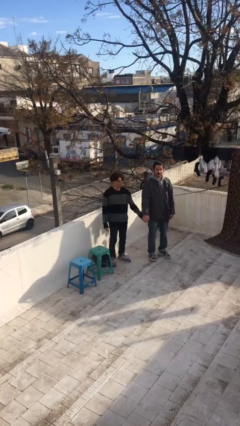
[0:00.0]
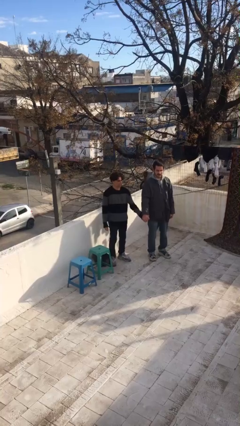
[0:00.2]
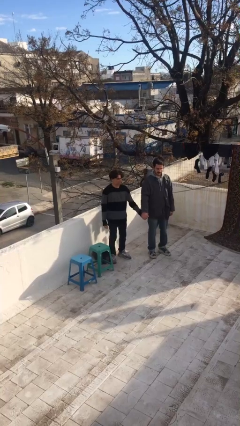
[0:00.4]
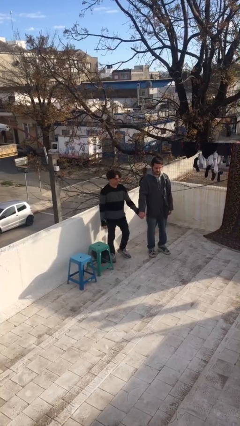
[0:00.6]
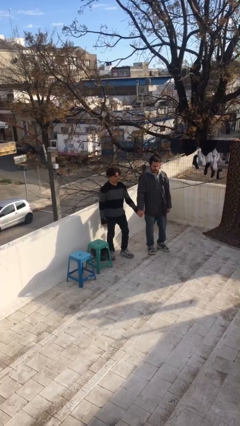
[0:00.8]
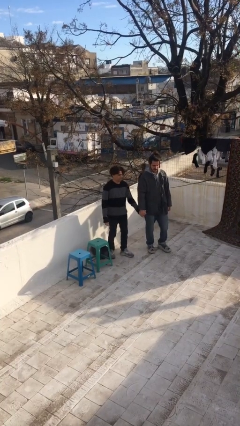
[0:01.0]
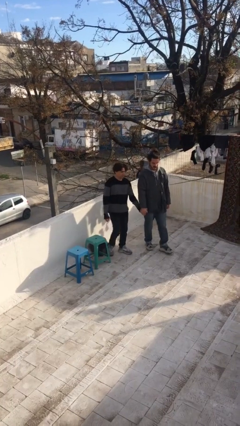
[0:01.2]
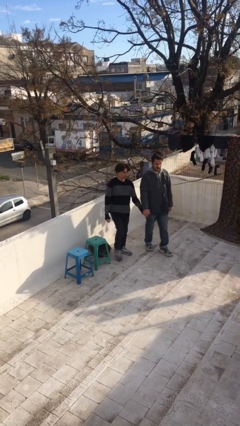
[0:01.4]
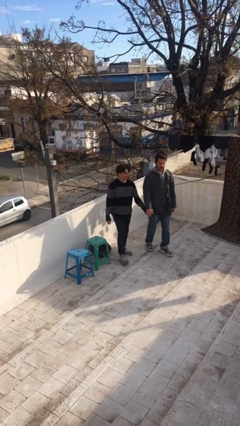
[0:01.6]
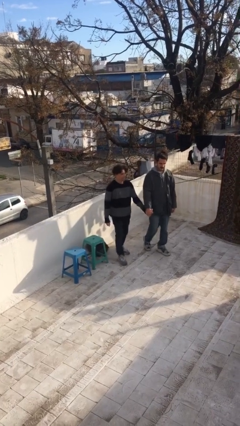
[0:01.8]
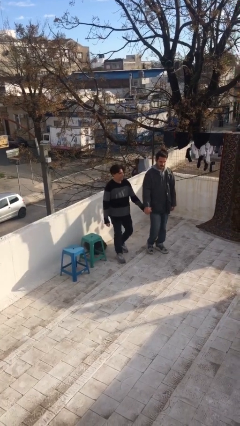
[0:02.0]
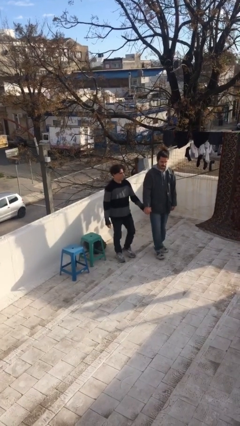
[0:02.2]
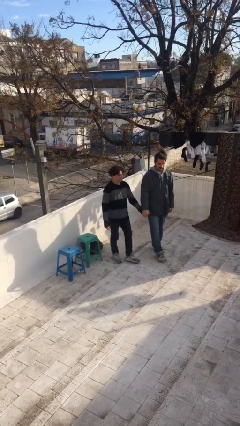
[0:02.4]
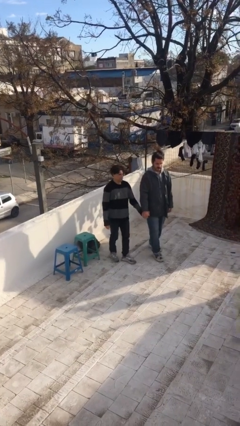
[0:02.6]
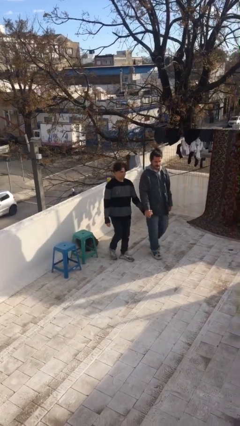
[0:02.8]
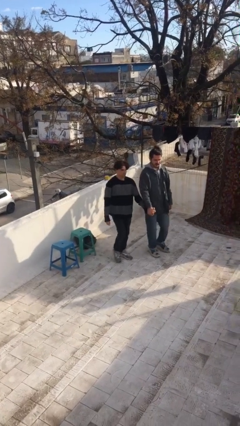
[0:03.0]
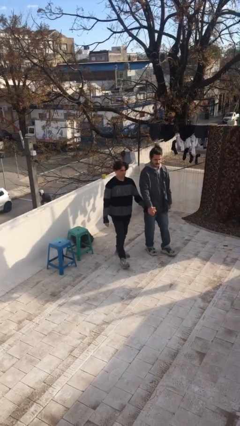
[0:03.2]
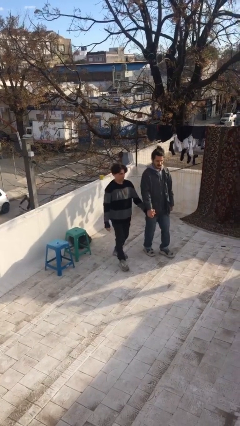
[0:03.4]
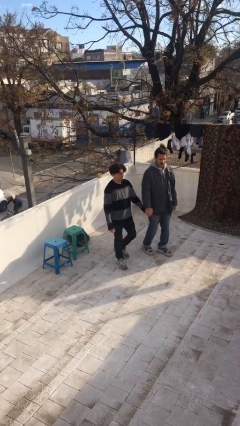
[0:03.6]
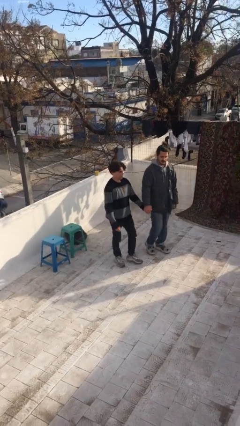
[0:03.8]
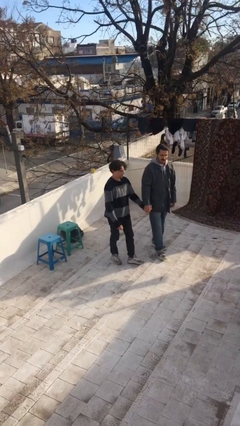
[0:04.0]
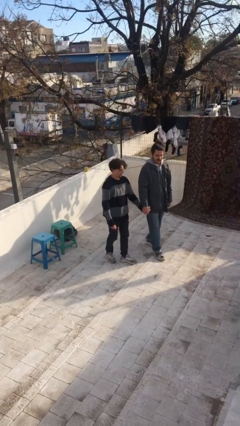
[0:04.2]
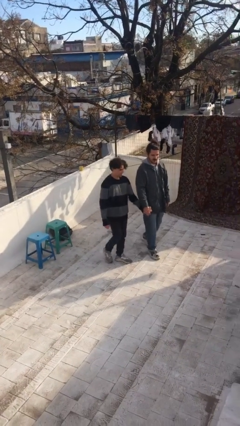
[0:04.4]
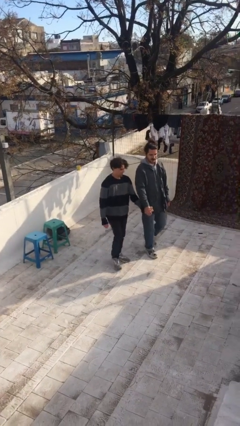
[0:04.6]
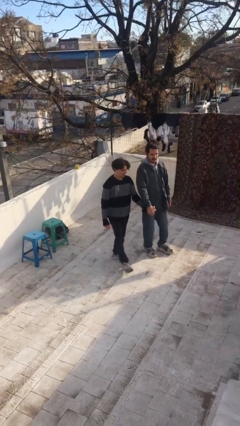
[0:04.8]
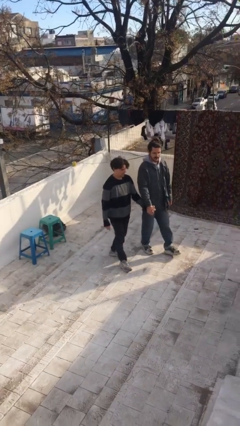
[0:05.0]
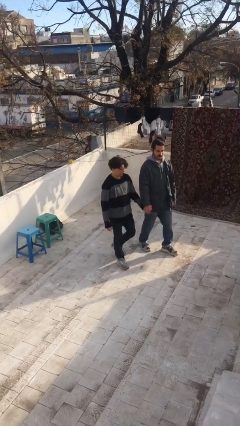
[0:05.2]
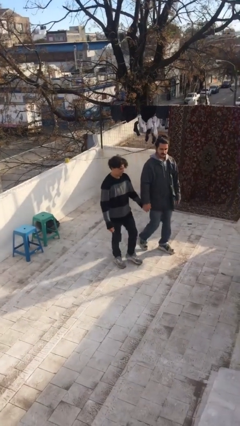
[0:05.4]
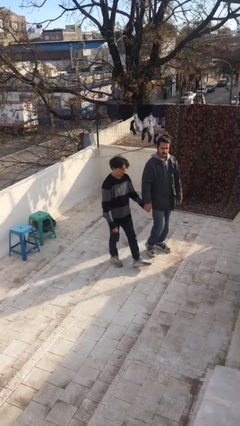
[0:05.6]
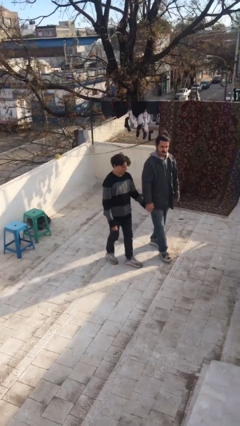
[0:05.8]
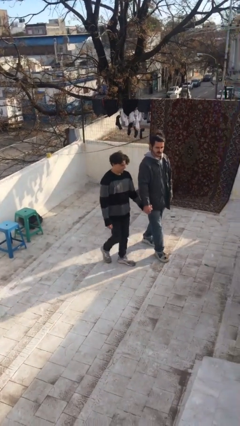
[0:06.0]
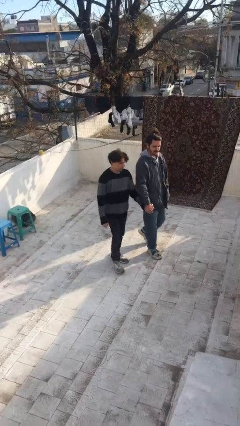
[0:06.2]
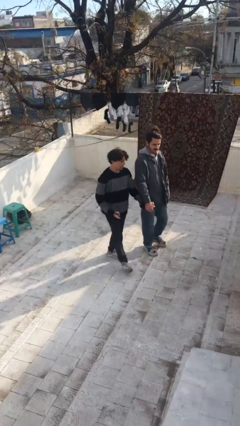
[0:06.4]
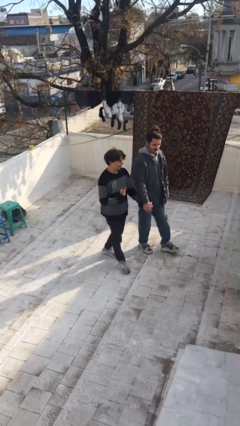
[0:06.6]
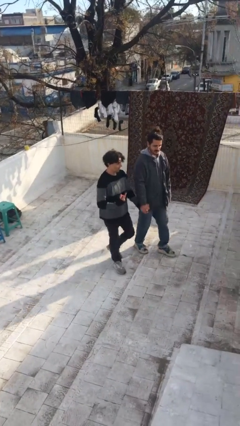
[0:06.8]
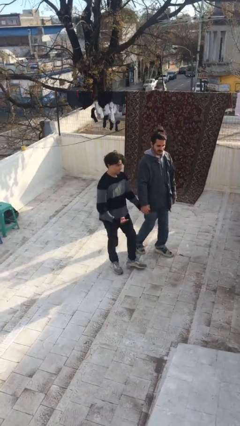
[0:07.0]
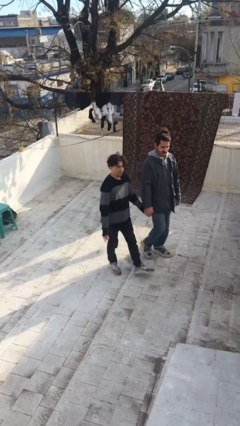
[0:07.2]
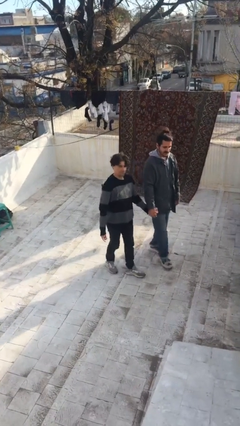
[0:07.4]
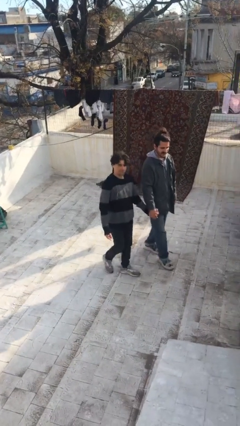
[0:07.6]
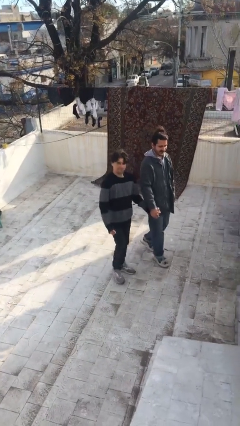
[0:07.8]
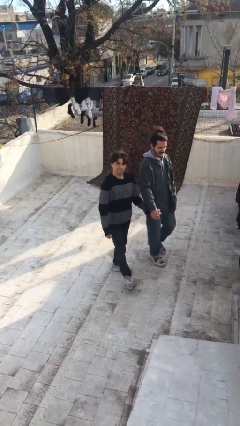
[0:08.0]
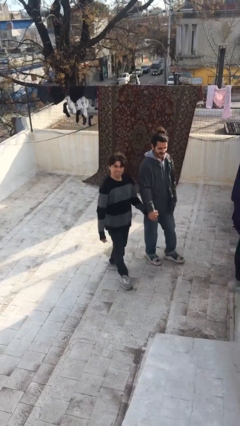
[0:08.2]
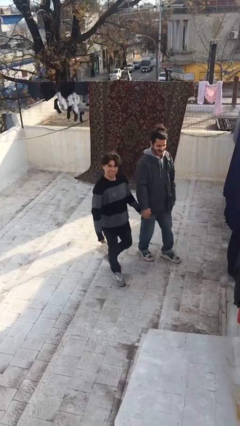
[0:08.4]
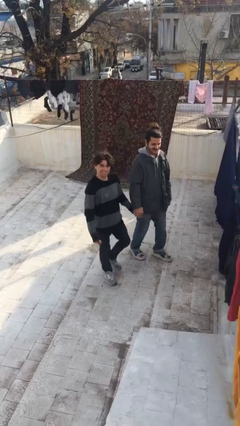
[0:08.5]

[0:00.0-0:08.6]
person holds hand

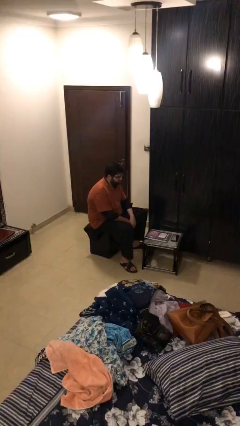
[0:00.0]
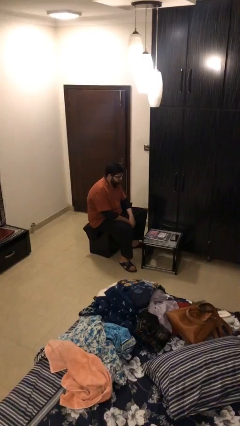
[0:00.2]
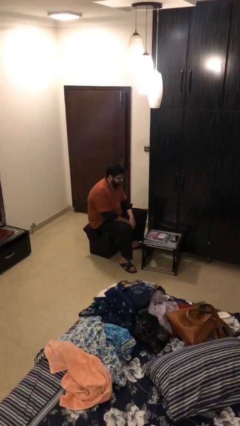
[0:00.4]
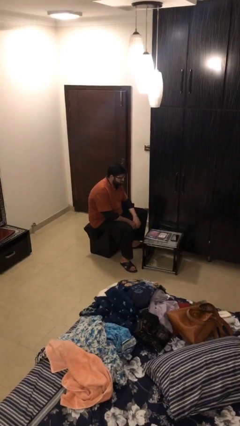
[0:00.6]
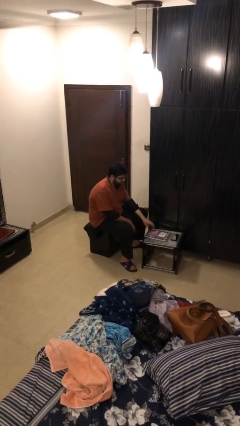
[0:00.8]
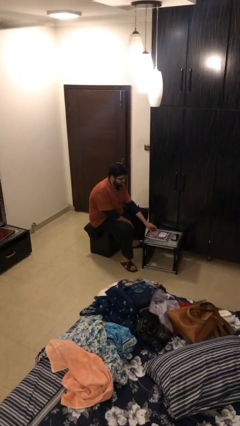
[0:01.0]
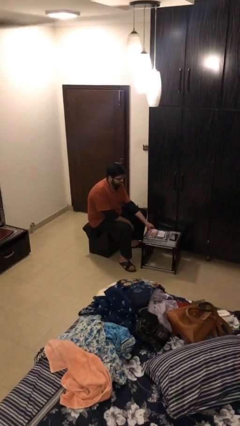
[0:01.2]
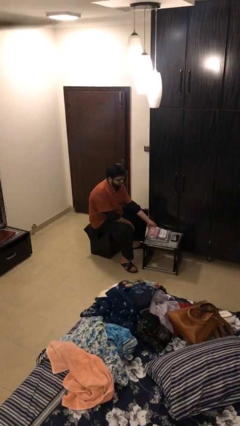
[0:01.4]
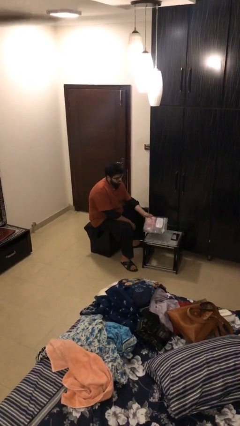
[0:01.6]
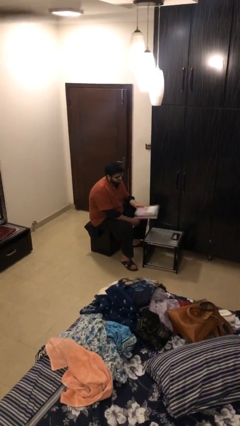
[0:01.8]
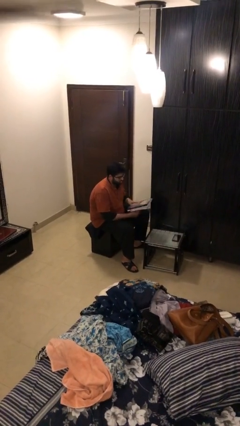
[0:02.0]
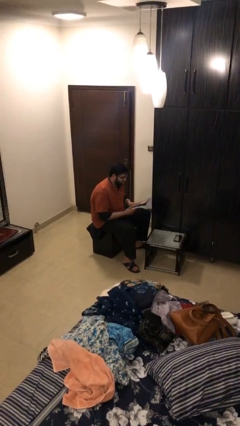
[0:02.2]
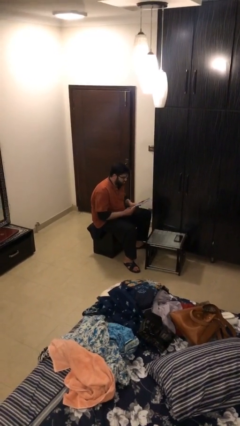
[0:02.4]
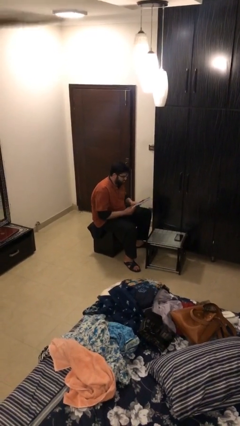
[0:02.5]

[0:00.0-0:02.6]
person picks up object from table

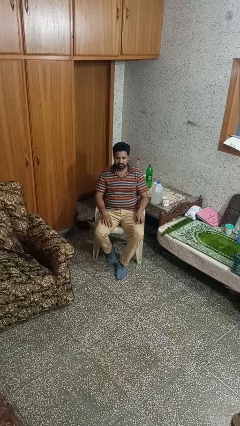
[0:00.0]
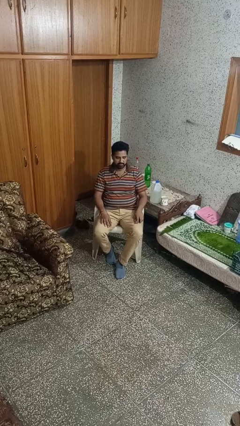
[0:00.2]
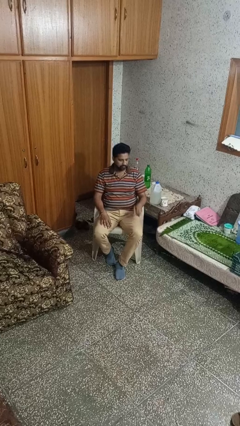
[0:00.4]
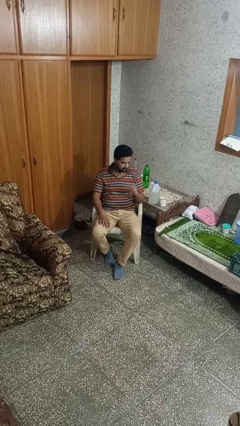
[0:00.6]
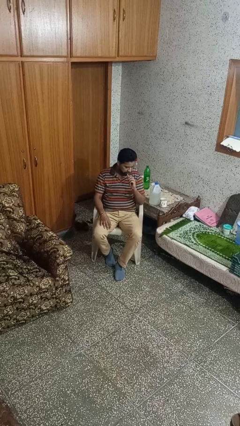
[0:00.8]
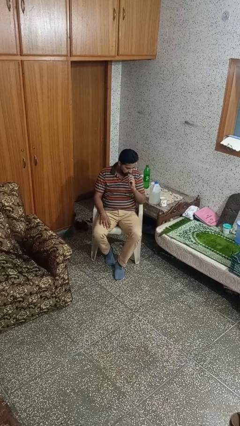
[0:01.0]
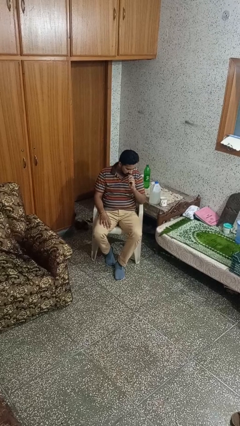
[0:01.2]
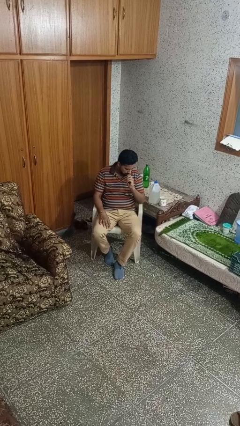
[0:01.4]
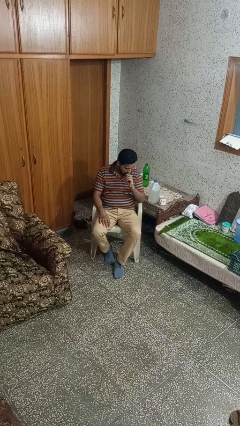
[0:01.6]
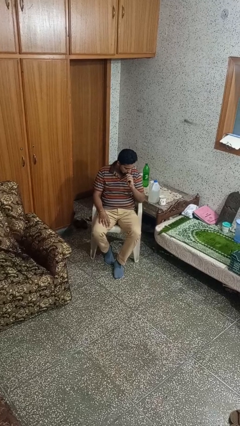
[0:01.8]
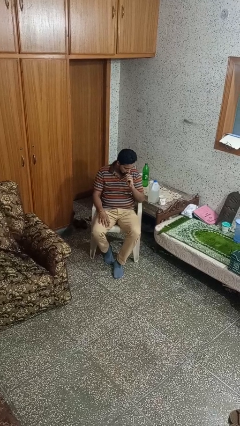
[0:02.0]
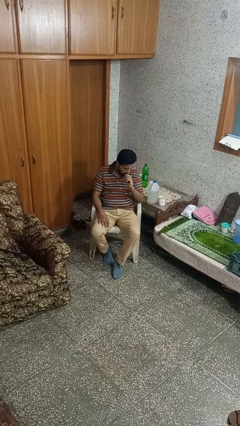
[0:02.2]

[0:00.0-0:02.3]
person vapes

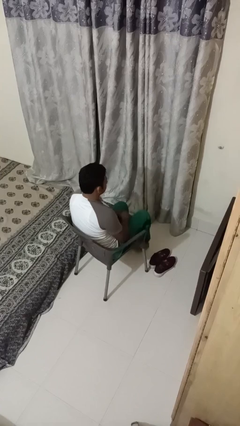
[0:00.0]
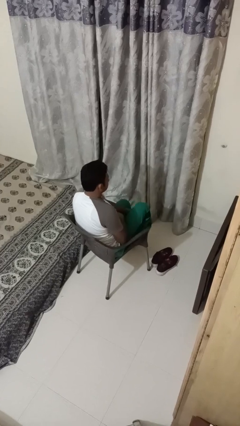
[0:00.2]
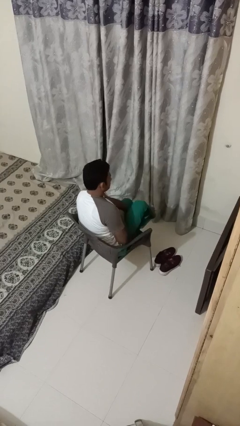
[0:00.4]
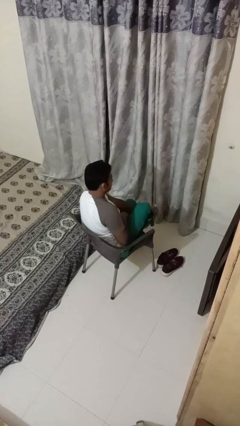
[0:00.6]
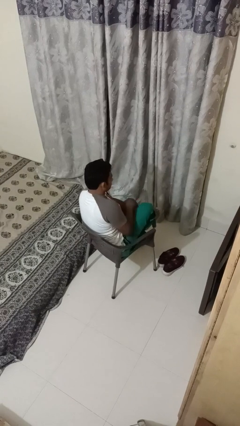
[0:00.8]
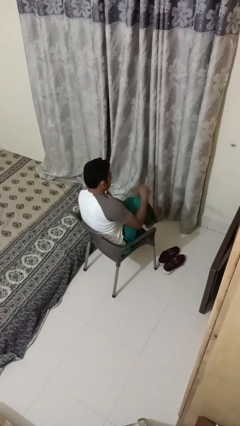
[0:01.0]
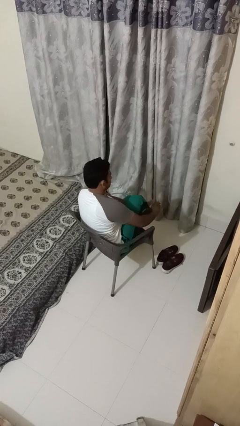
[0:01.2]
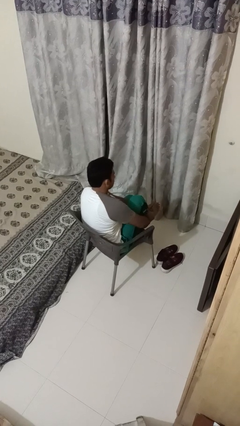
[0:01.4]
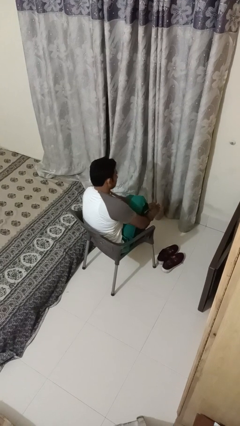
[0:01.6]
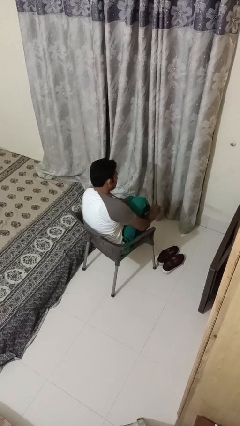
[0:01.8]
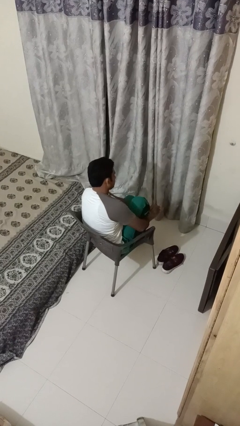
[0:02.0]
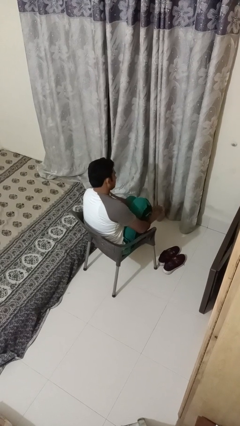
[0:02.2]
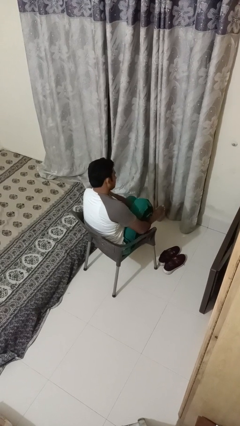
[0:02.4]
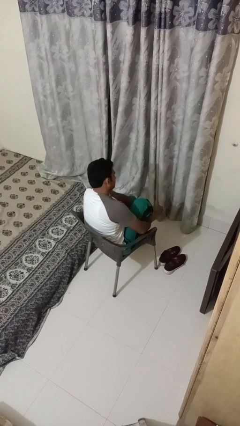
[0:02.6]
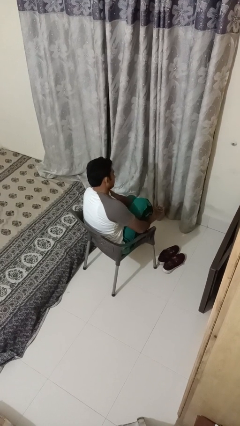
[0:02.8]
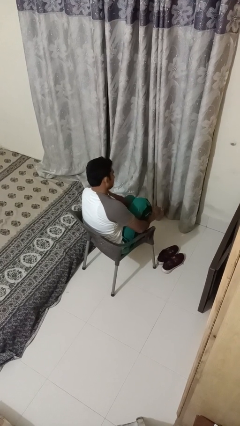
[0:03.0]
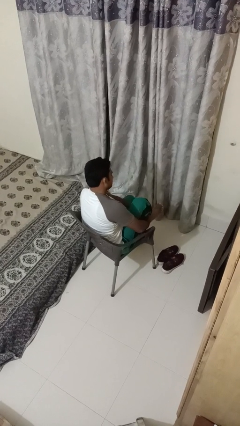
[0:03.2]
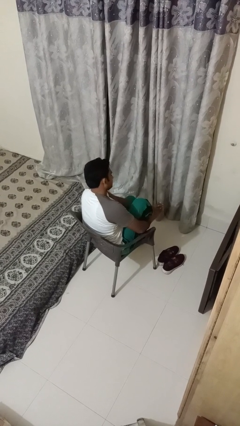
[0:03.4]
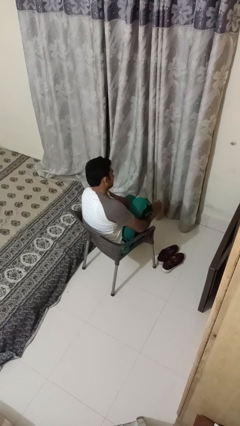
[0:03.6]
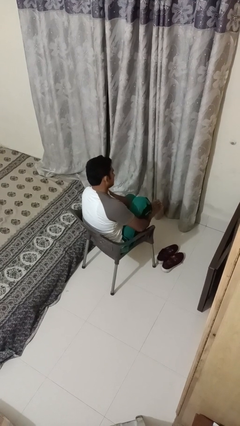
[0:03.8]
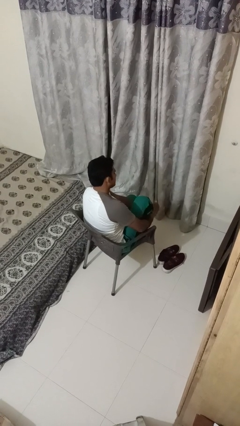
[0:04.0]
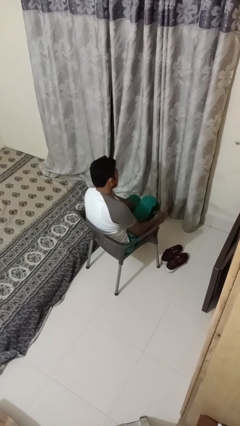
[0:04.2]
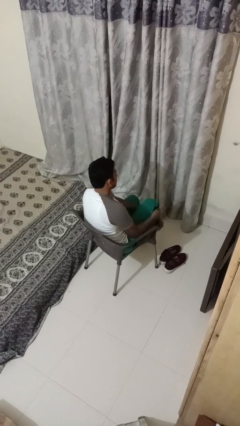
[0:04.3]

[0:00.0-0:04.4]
person rubs foot

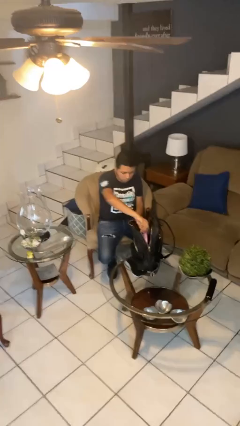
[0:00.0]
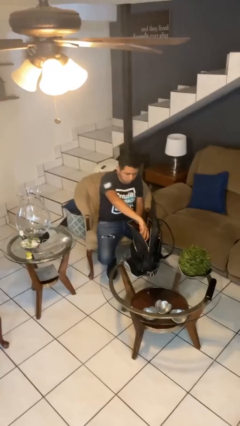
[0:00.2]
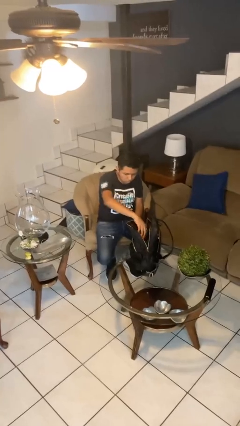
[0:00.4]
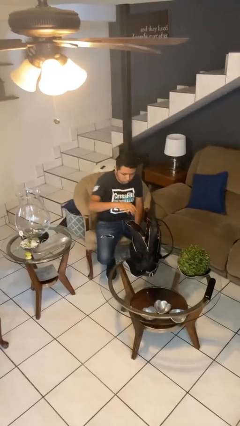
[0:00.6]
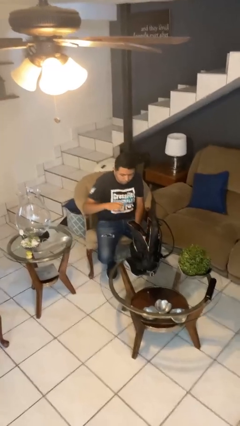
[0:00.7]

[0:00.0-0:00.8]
person puts object into backpack
